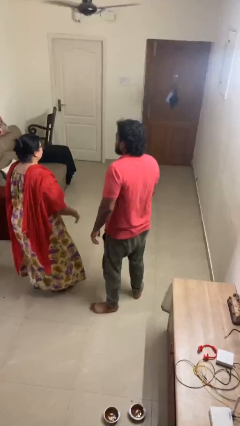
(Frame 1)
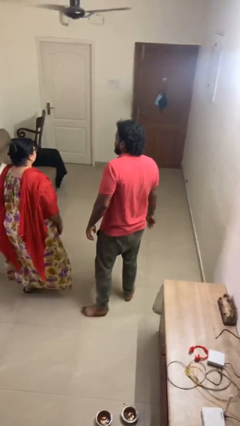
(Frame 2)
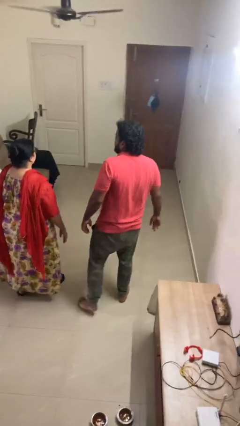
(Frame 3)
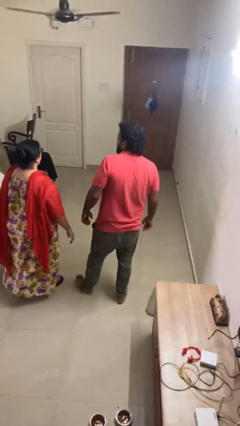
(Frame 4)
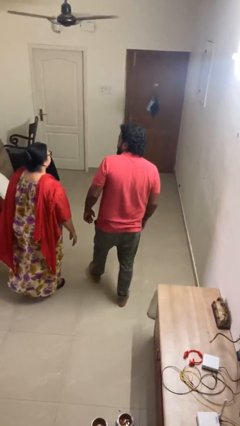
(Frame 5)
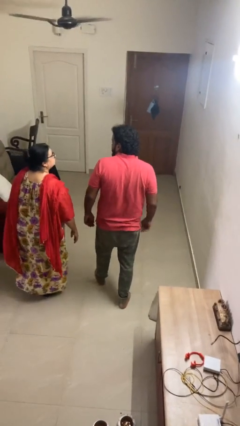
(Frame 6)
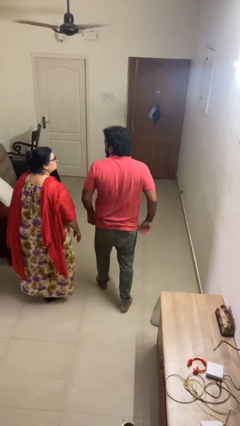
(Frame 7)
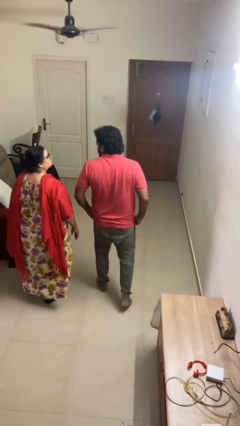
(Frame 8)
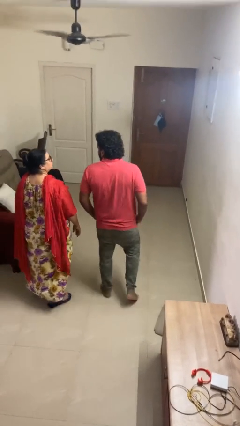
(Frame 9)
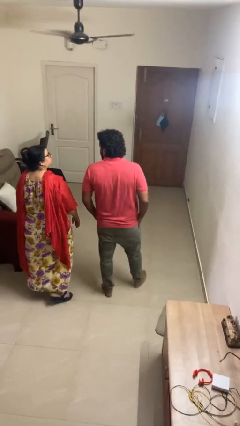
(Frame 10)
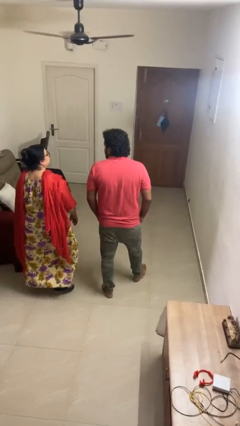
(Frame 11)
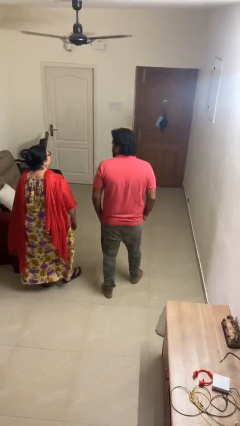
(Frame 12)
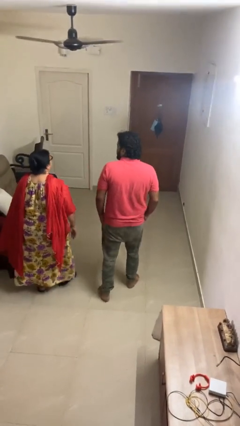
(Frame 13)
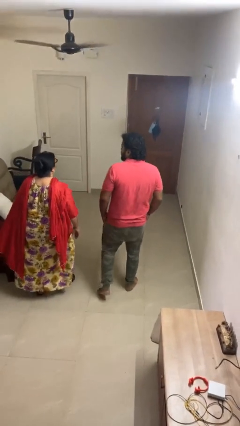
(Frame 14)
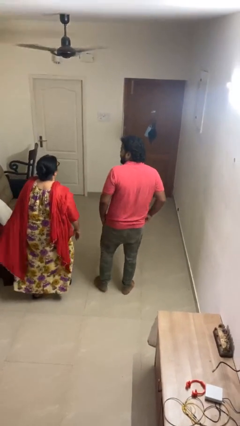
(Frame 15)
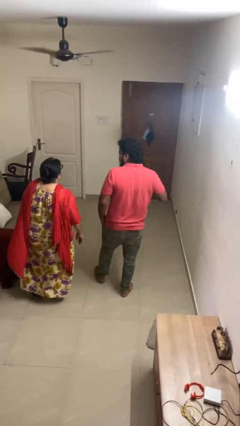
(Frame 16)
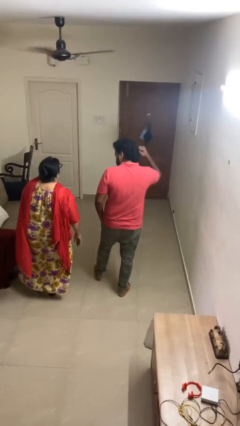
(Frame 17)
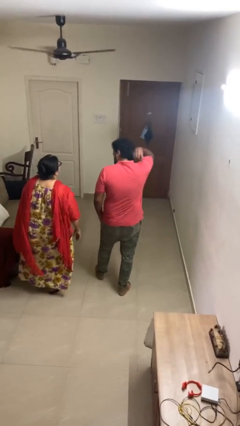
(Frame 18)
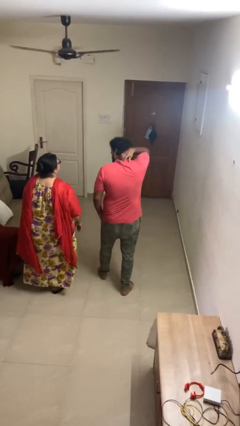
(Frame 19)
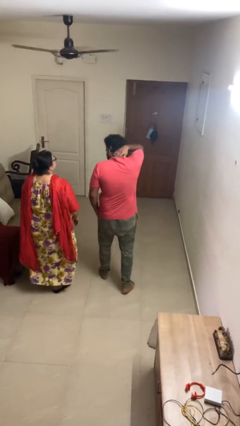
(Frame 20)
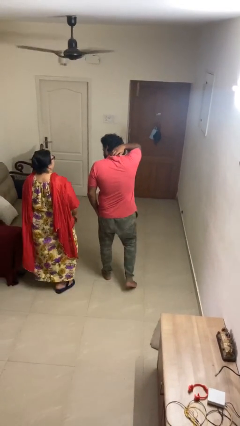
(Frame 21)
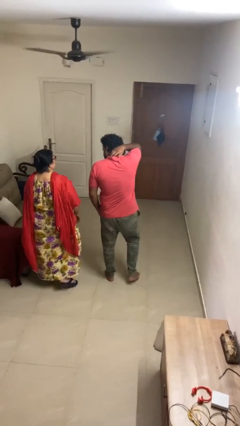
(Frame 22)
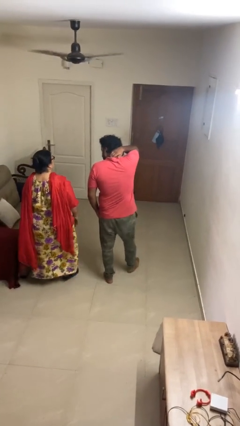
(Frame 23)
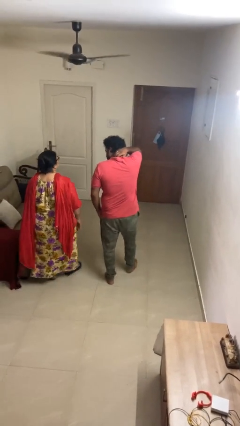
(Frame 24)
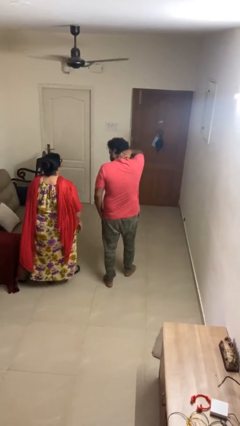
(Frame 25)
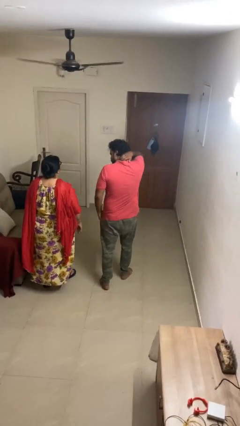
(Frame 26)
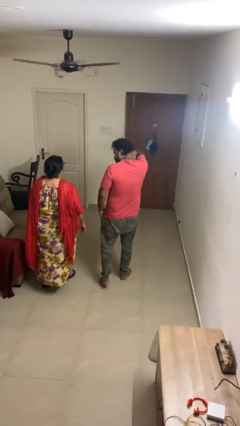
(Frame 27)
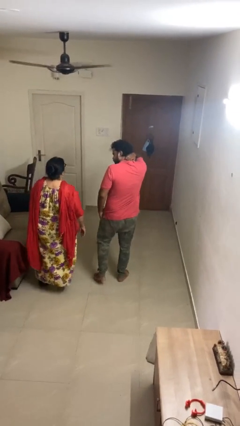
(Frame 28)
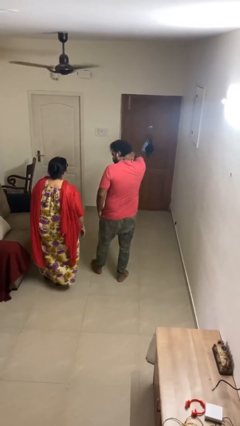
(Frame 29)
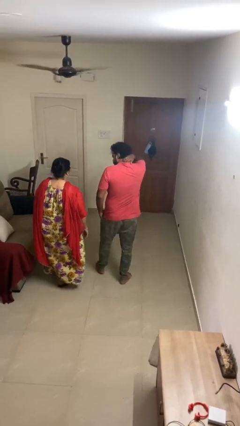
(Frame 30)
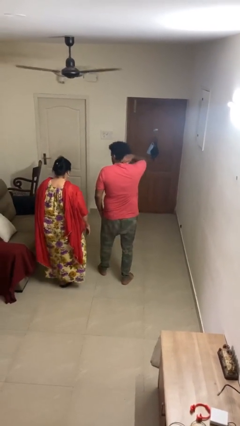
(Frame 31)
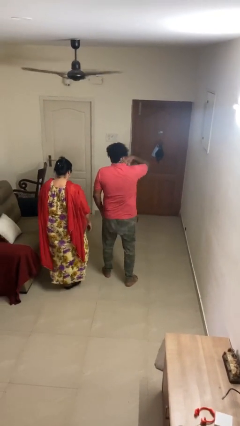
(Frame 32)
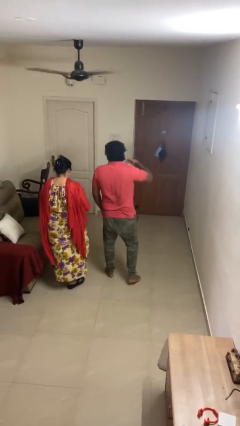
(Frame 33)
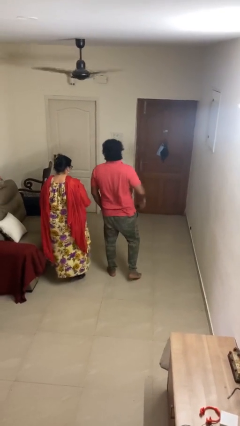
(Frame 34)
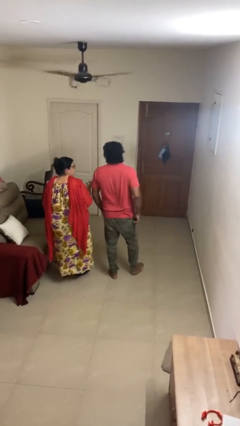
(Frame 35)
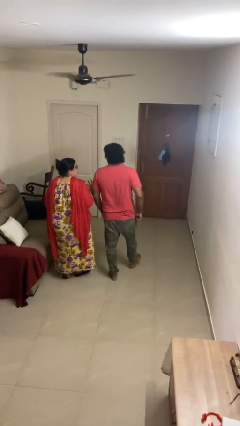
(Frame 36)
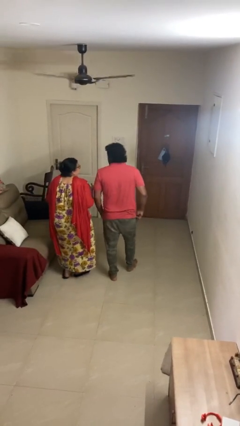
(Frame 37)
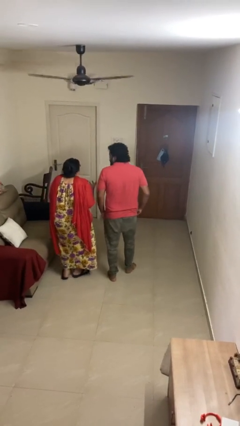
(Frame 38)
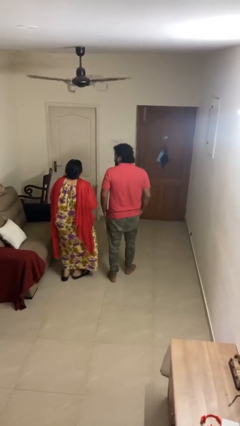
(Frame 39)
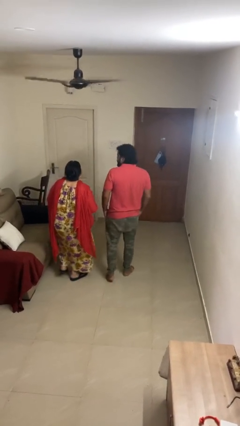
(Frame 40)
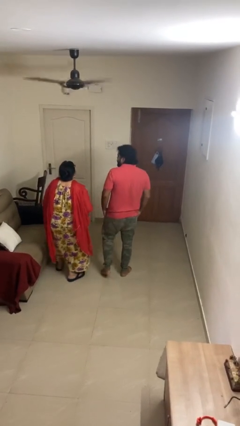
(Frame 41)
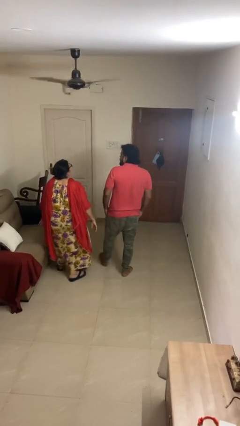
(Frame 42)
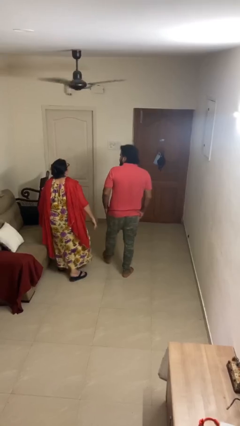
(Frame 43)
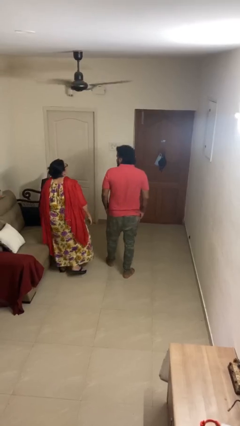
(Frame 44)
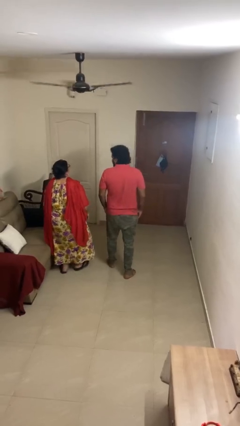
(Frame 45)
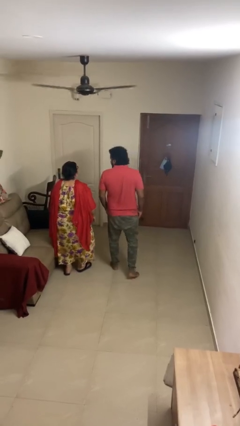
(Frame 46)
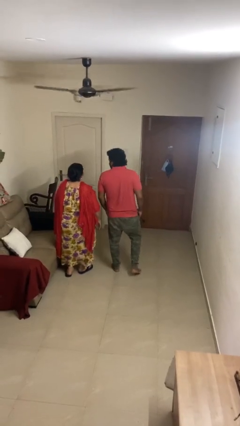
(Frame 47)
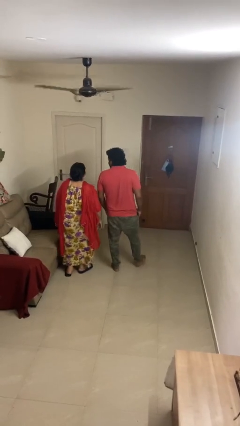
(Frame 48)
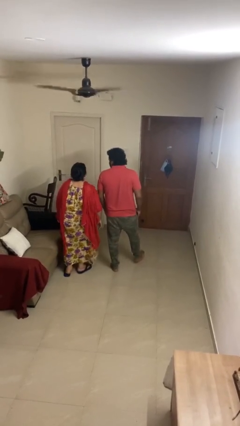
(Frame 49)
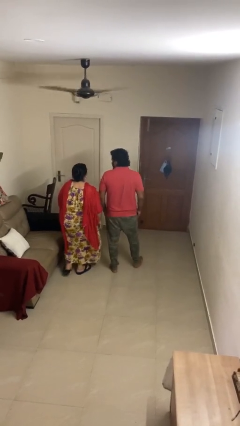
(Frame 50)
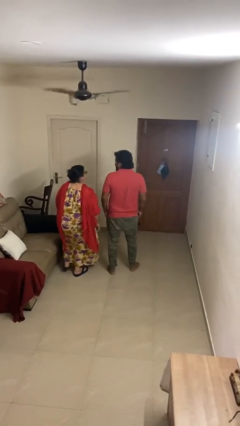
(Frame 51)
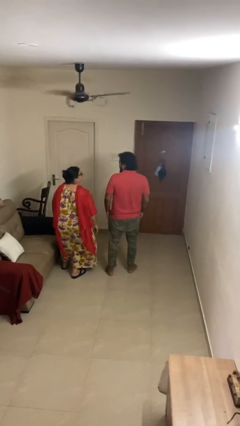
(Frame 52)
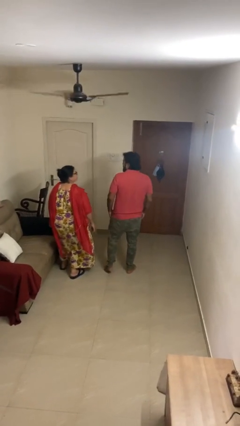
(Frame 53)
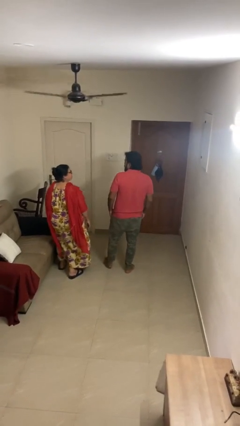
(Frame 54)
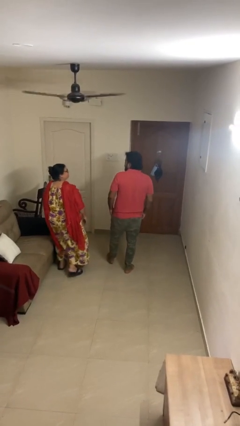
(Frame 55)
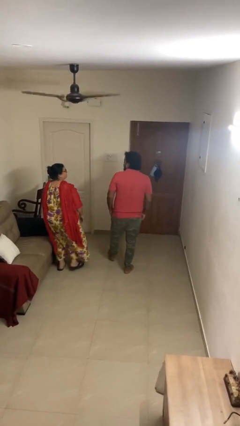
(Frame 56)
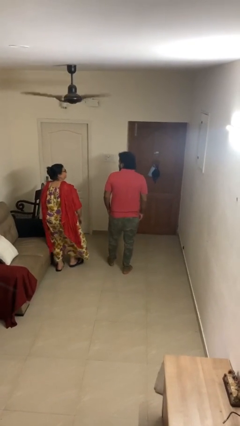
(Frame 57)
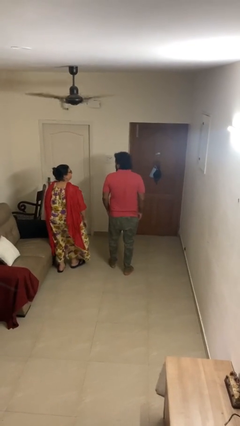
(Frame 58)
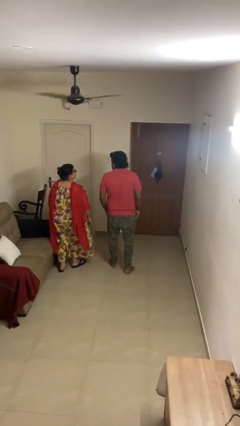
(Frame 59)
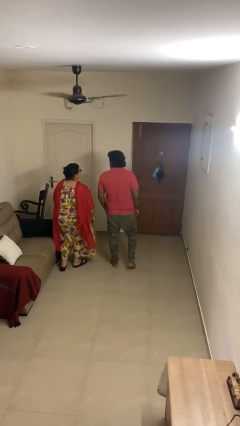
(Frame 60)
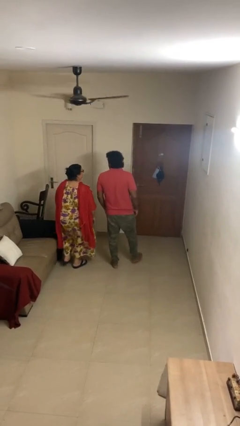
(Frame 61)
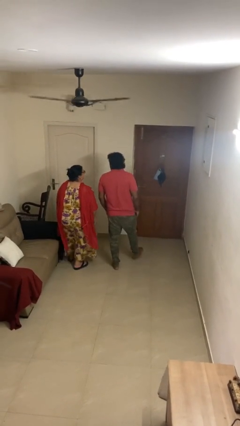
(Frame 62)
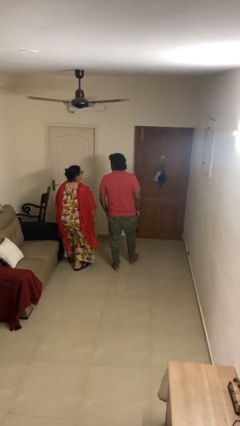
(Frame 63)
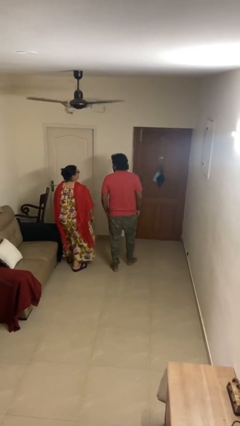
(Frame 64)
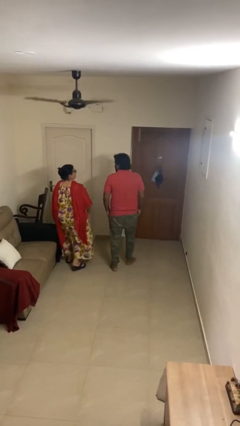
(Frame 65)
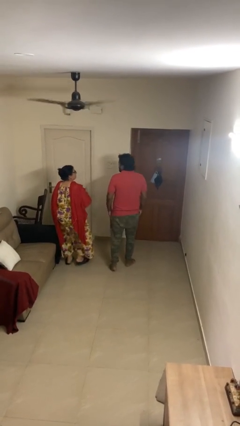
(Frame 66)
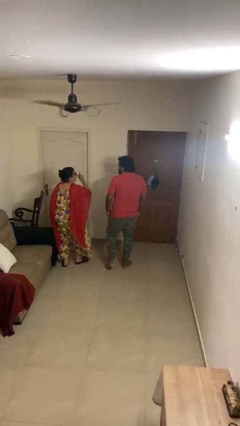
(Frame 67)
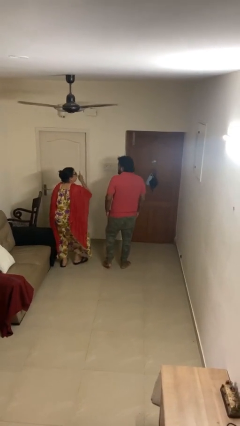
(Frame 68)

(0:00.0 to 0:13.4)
person talks to person

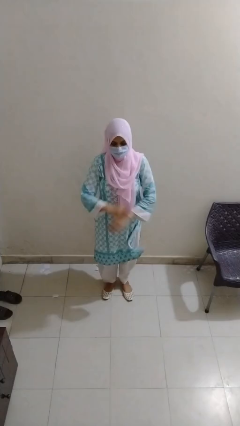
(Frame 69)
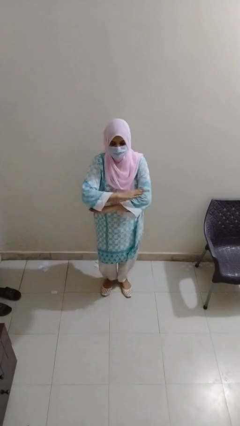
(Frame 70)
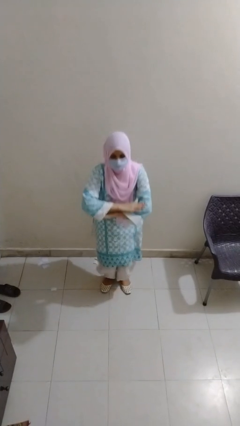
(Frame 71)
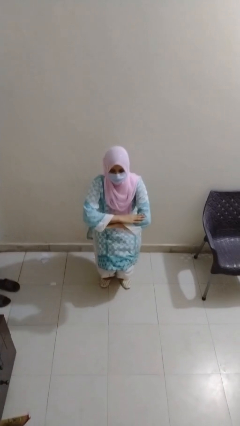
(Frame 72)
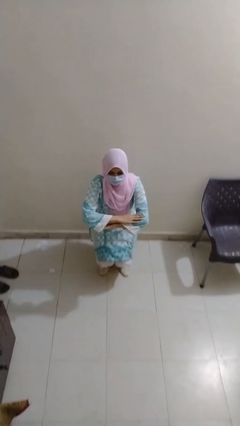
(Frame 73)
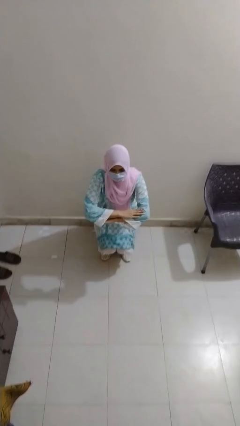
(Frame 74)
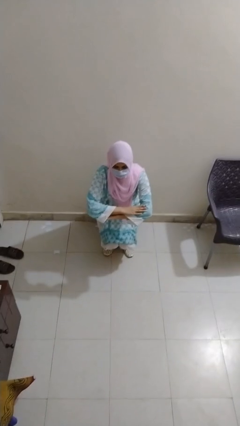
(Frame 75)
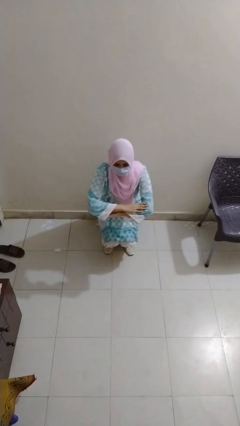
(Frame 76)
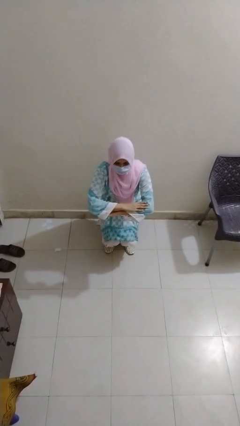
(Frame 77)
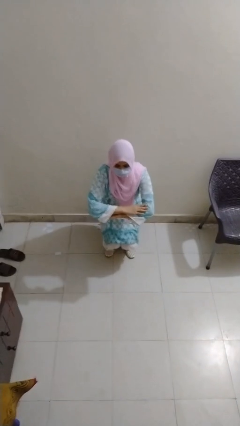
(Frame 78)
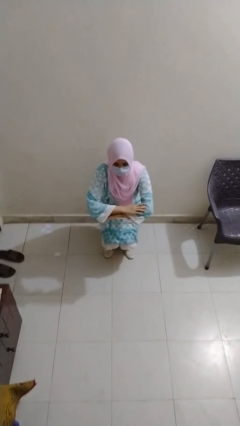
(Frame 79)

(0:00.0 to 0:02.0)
person squats

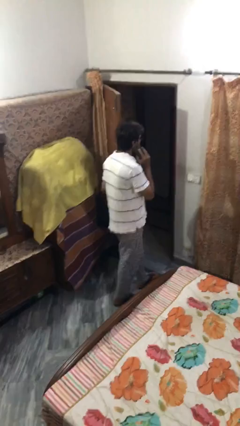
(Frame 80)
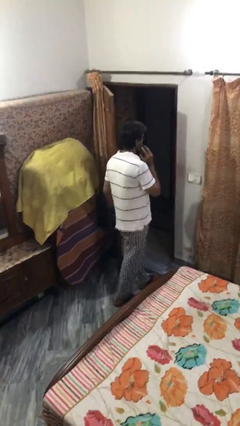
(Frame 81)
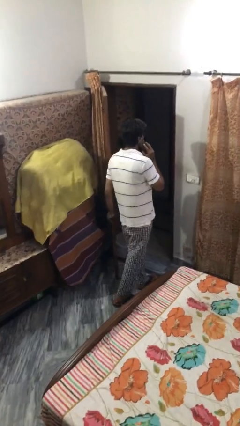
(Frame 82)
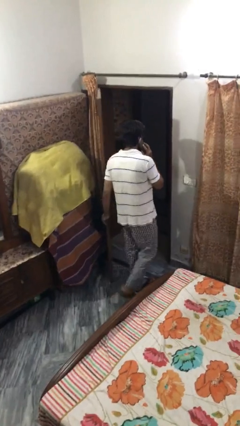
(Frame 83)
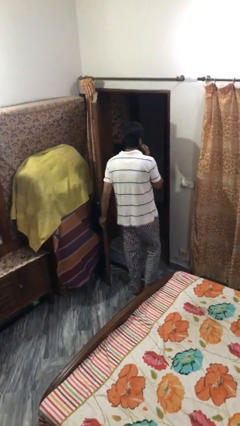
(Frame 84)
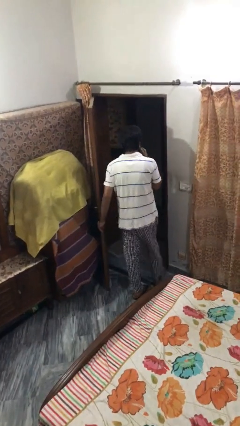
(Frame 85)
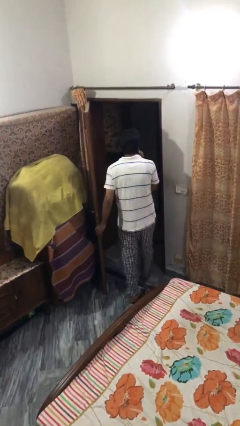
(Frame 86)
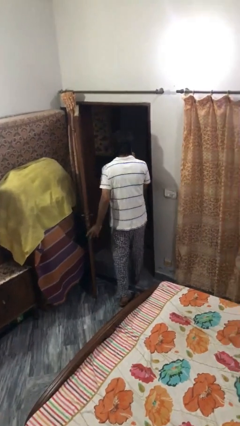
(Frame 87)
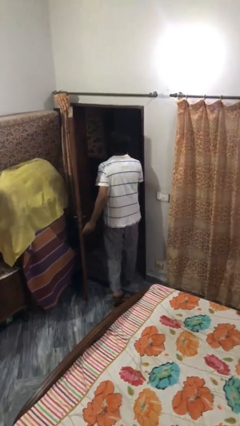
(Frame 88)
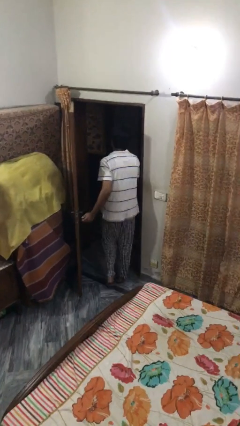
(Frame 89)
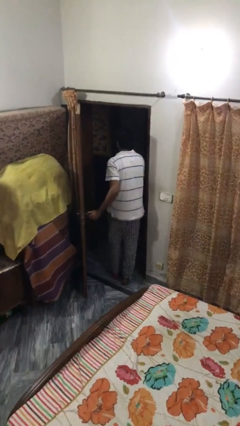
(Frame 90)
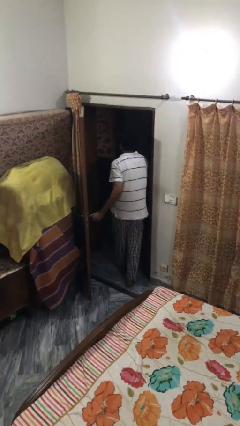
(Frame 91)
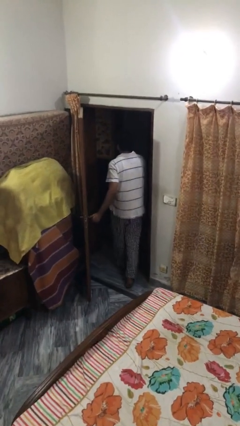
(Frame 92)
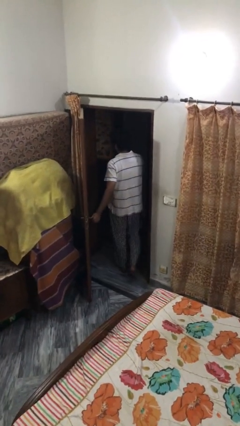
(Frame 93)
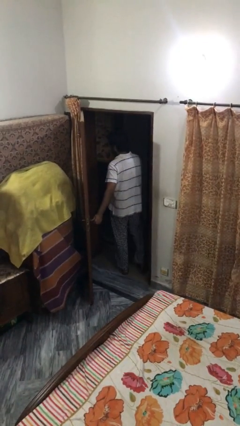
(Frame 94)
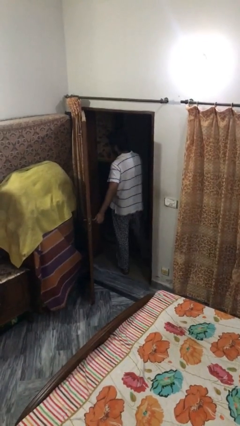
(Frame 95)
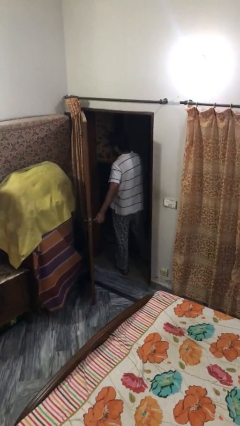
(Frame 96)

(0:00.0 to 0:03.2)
person exits scene through structure
